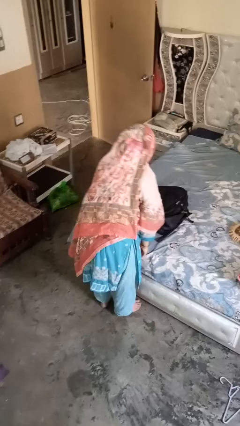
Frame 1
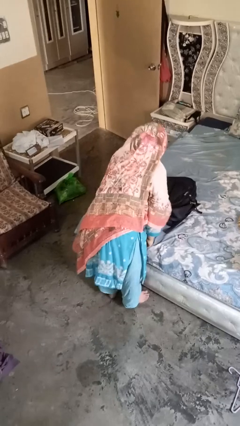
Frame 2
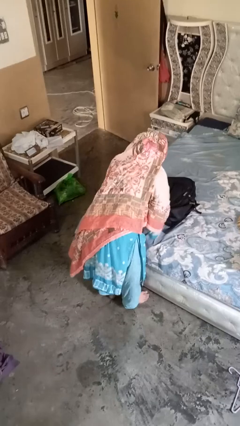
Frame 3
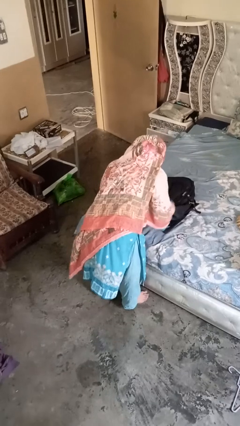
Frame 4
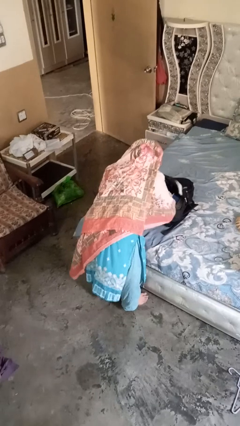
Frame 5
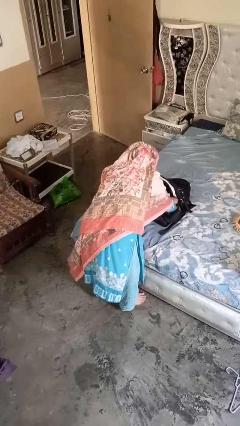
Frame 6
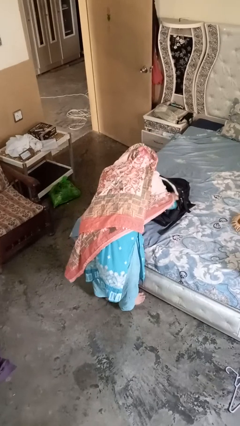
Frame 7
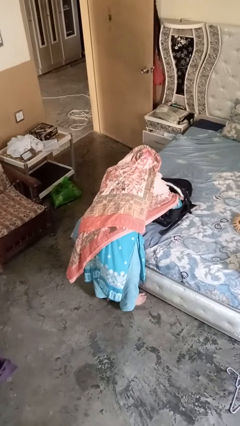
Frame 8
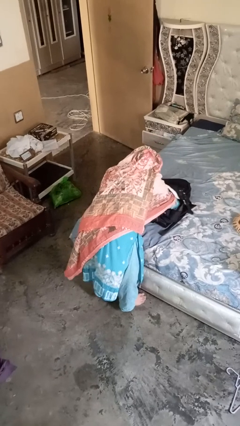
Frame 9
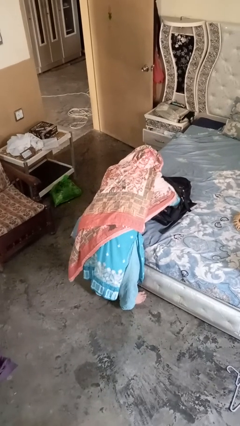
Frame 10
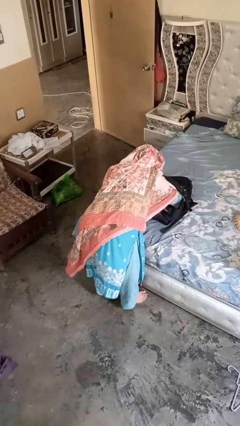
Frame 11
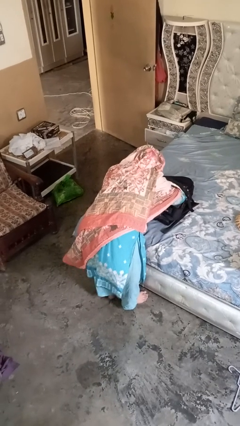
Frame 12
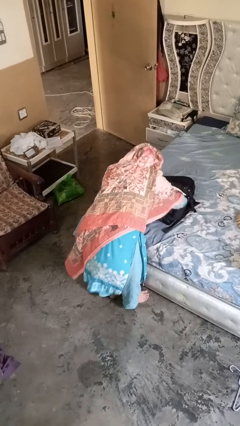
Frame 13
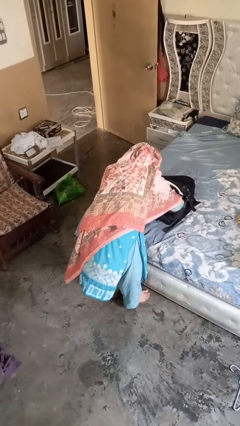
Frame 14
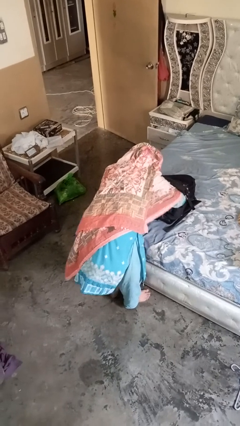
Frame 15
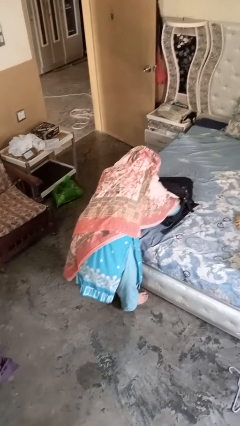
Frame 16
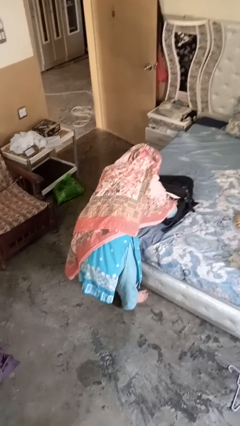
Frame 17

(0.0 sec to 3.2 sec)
person searches in bag

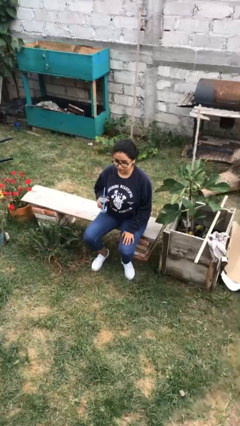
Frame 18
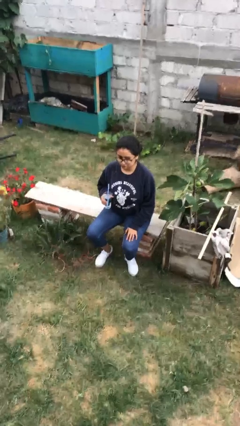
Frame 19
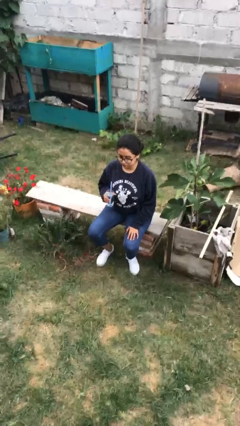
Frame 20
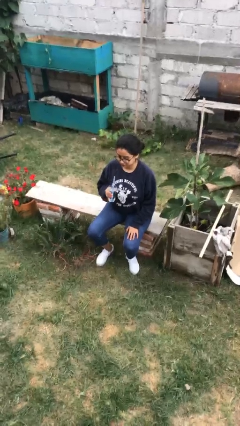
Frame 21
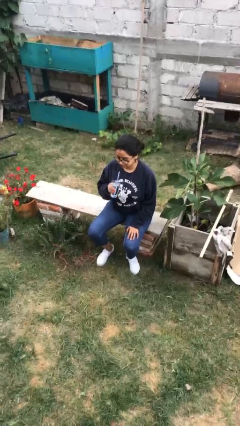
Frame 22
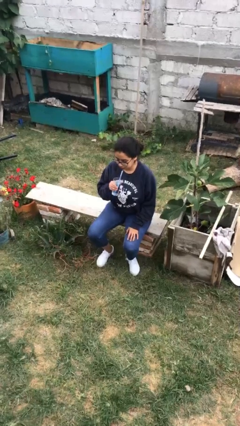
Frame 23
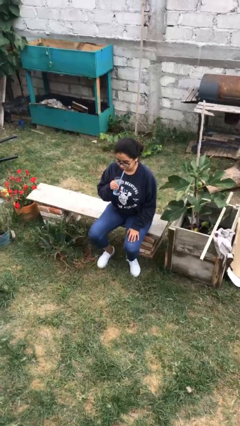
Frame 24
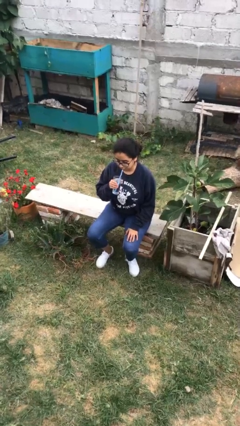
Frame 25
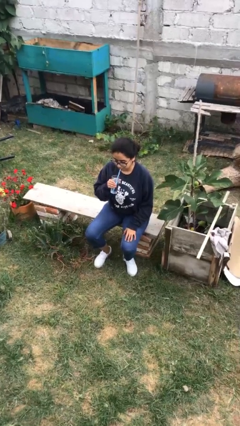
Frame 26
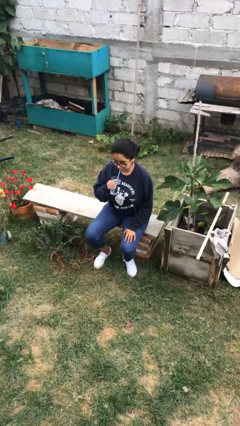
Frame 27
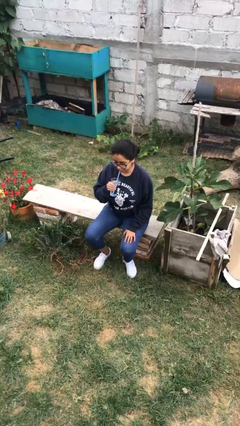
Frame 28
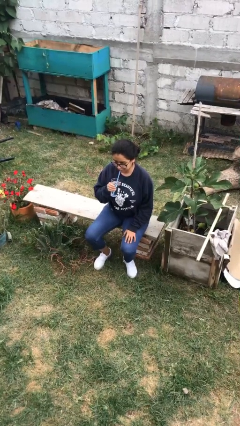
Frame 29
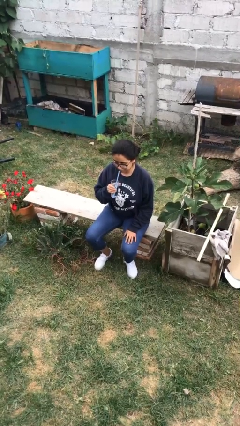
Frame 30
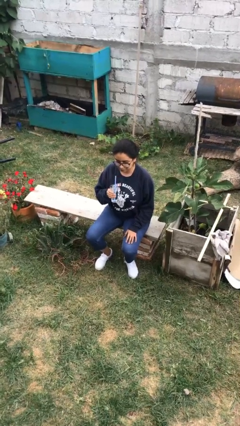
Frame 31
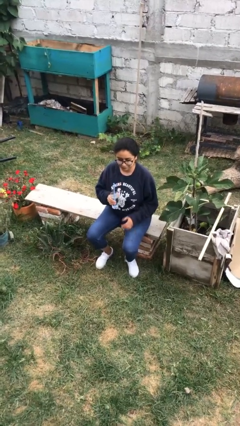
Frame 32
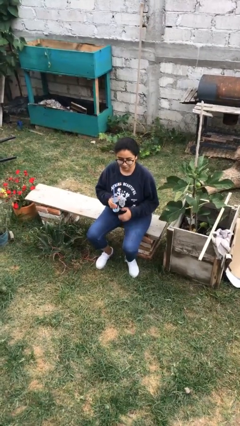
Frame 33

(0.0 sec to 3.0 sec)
person drinks from straw

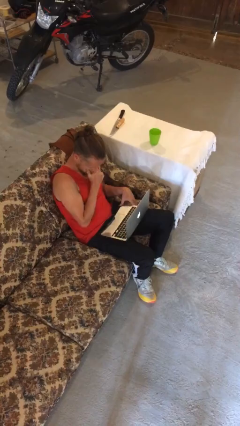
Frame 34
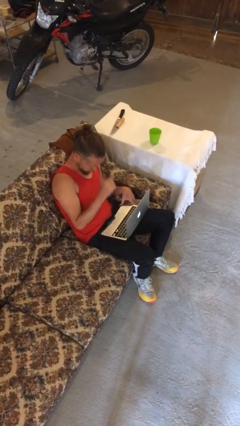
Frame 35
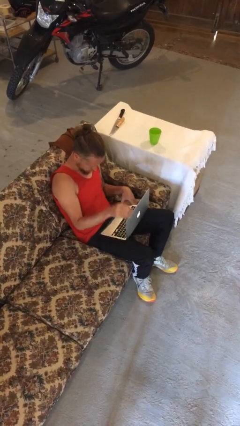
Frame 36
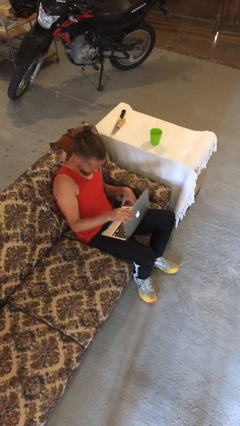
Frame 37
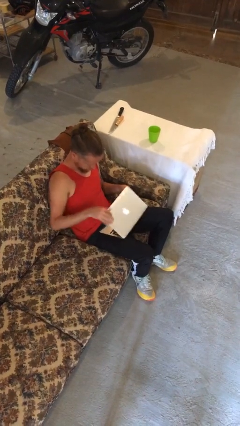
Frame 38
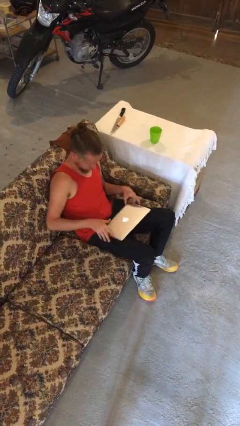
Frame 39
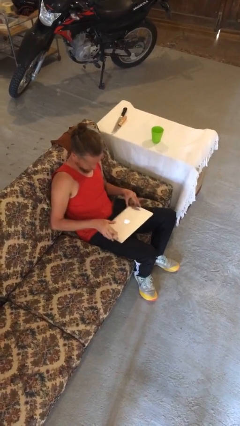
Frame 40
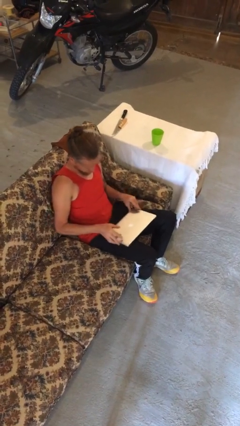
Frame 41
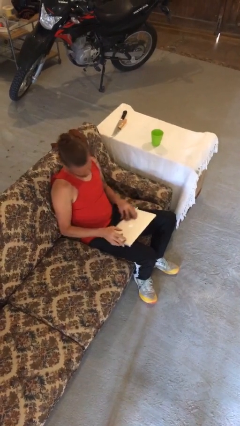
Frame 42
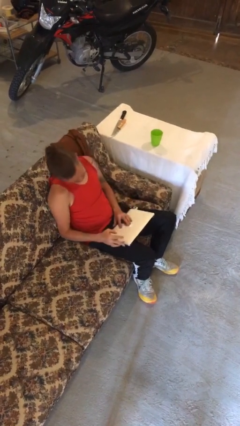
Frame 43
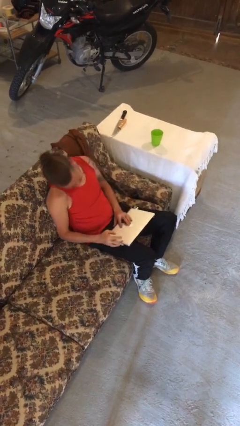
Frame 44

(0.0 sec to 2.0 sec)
person closes laptop

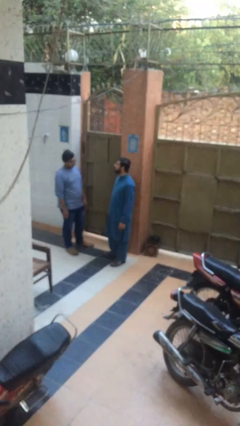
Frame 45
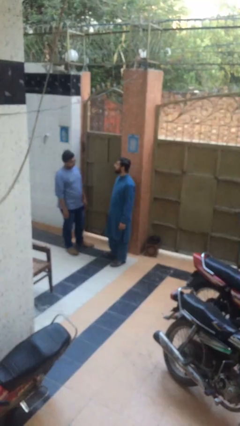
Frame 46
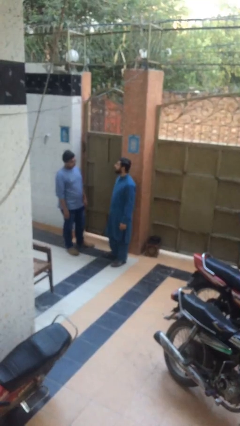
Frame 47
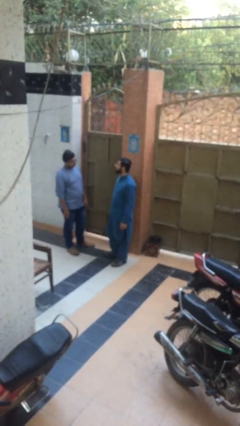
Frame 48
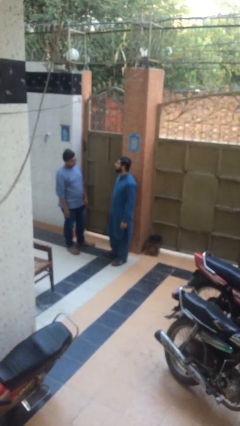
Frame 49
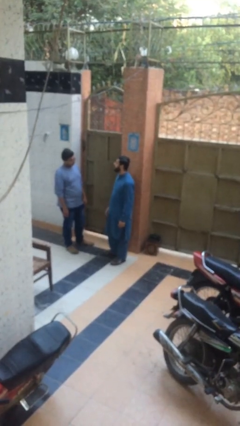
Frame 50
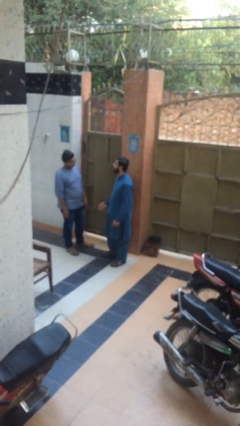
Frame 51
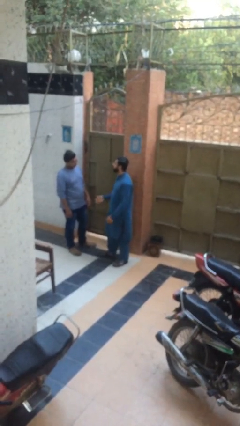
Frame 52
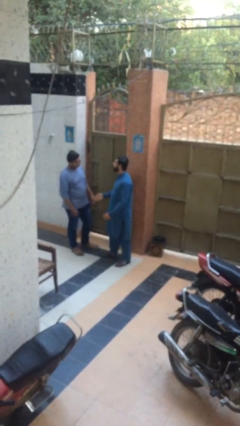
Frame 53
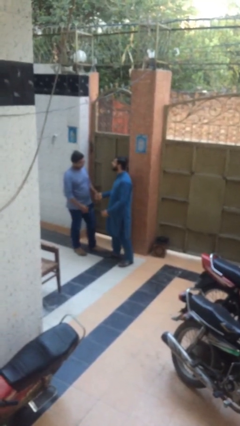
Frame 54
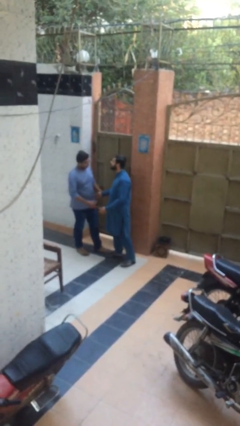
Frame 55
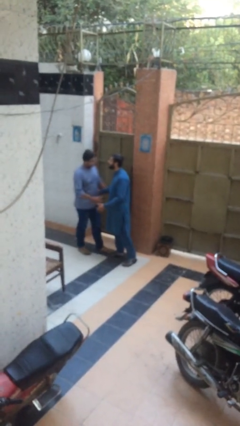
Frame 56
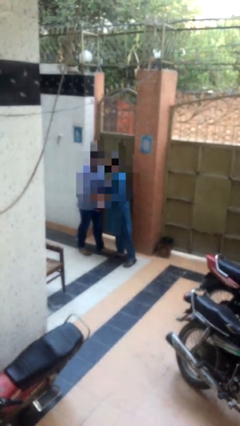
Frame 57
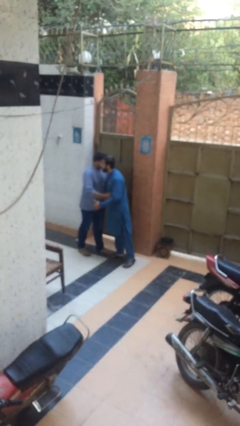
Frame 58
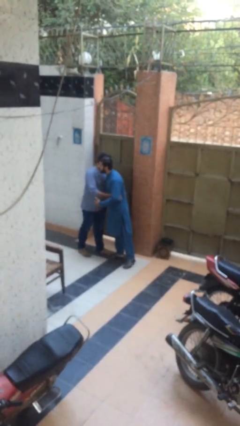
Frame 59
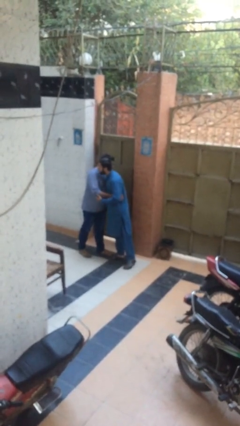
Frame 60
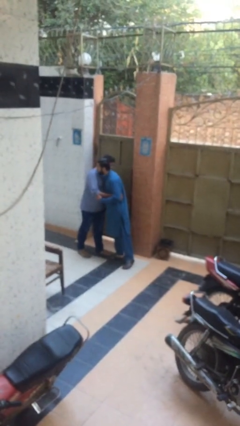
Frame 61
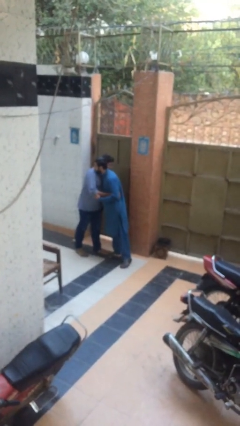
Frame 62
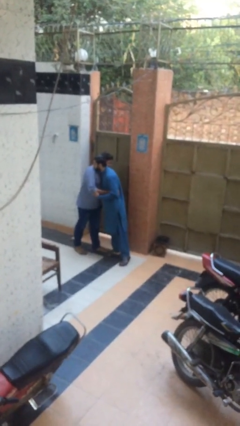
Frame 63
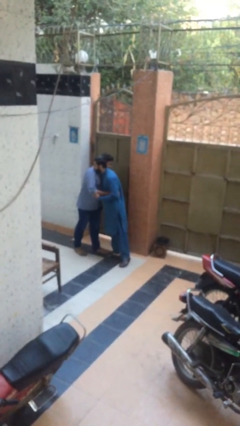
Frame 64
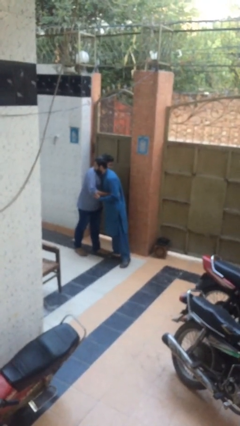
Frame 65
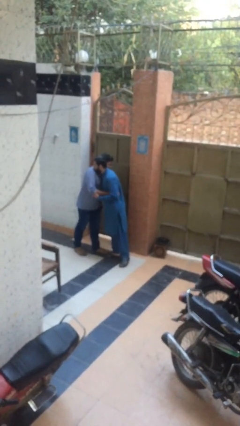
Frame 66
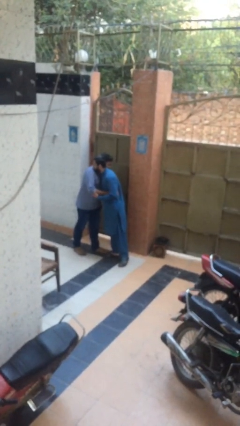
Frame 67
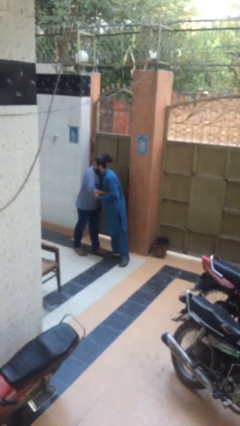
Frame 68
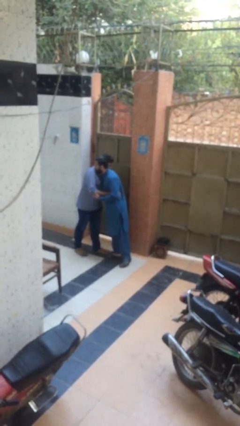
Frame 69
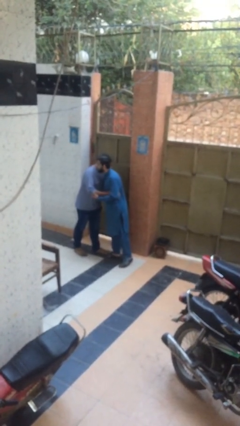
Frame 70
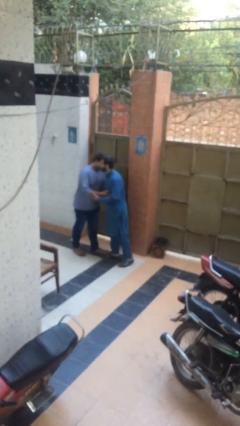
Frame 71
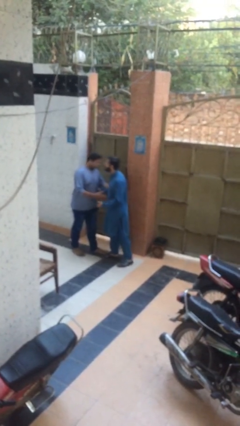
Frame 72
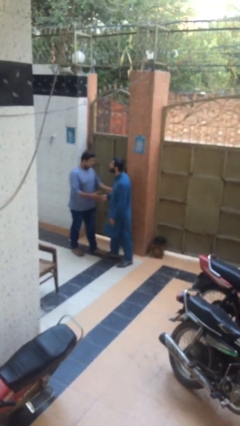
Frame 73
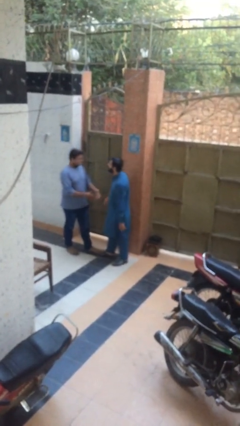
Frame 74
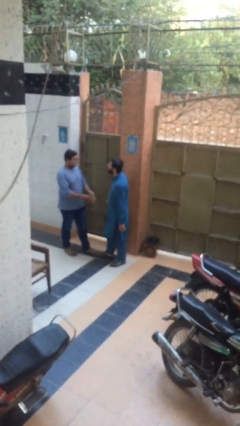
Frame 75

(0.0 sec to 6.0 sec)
person embraces person

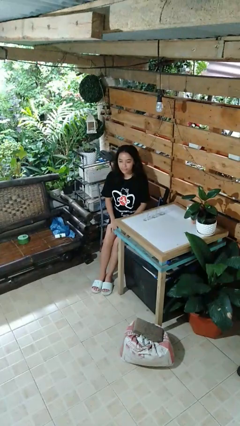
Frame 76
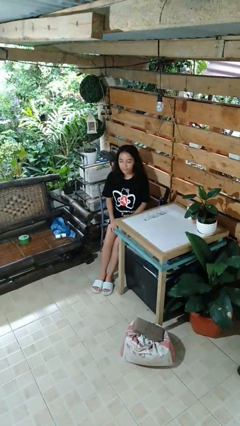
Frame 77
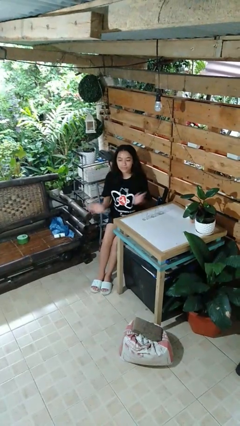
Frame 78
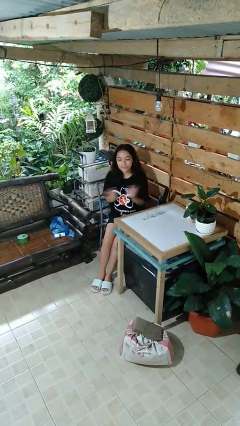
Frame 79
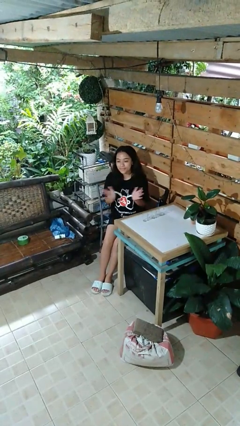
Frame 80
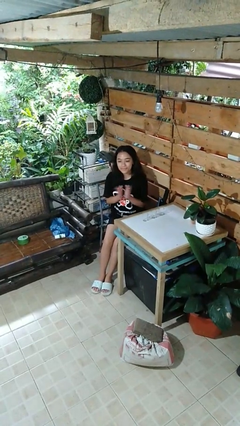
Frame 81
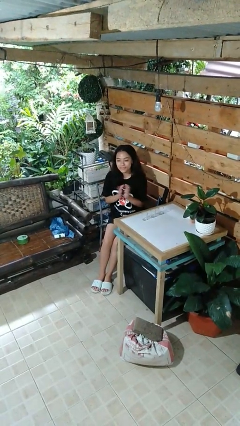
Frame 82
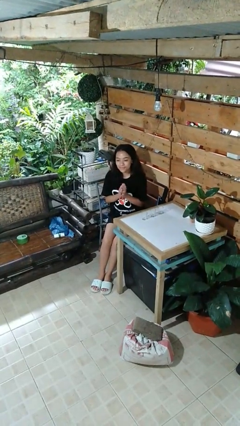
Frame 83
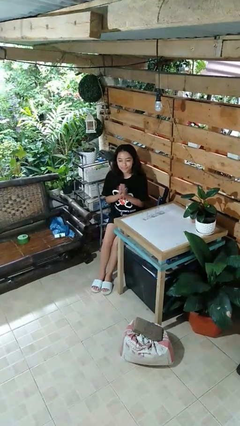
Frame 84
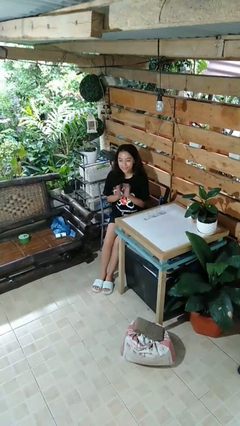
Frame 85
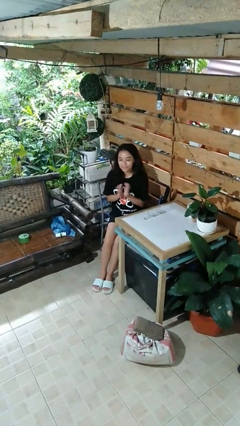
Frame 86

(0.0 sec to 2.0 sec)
person claps hands

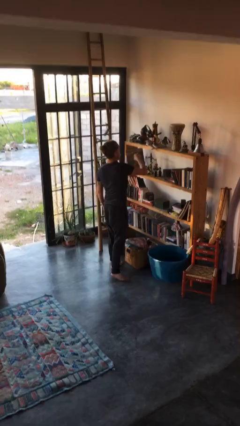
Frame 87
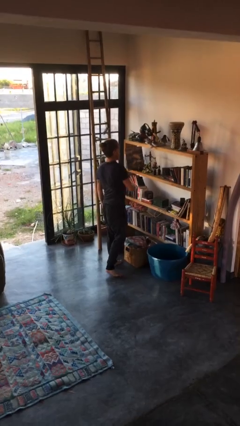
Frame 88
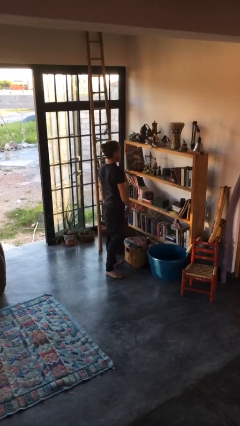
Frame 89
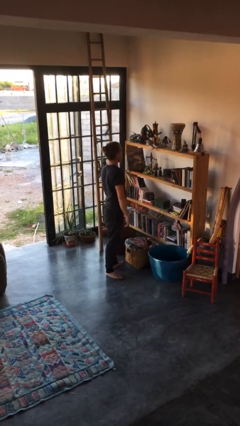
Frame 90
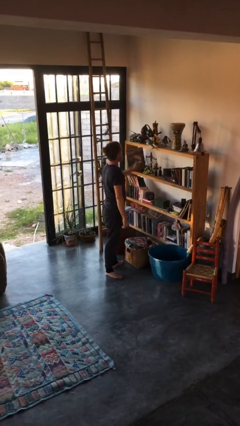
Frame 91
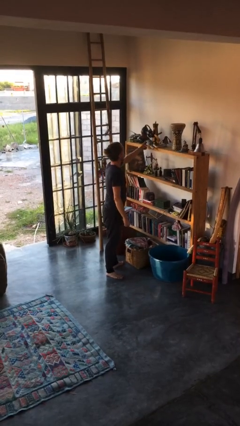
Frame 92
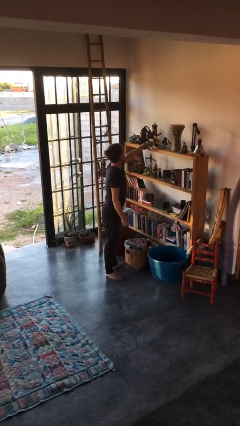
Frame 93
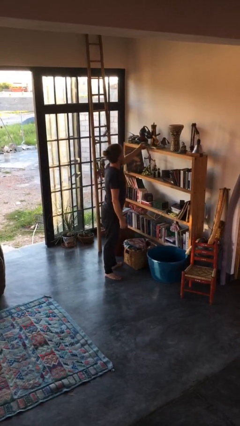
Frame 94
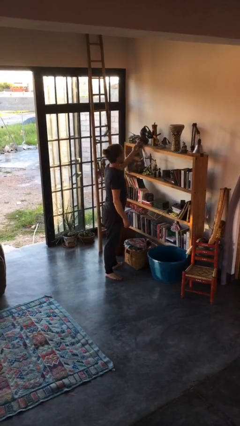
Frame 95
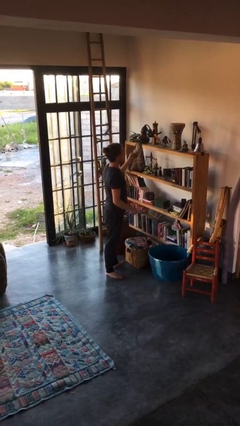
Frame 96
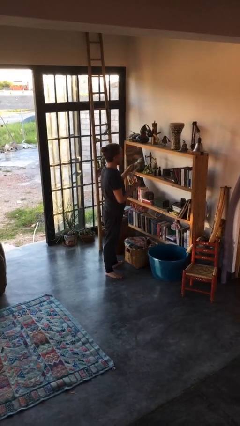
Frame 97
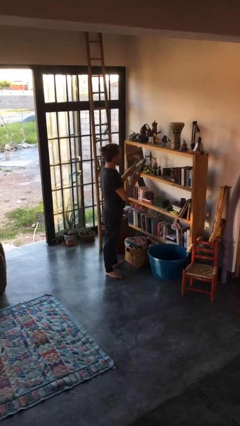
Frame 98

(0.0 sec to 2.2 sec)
person picks up object from countertop
